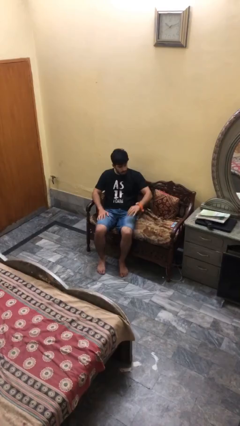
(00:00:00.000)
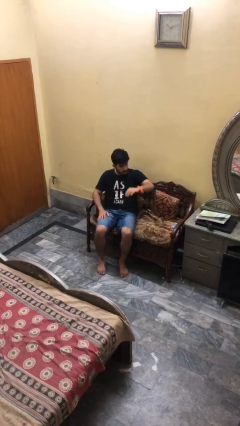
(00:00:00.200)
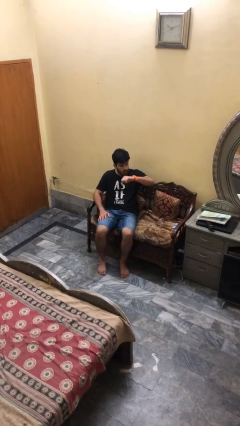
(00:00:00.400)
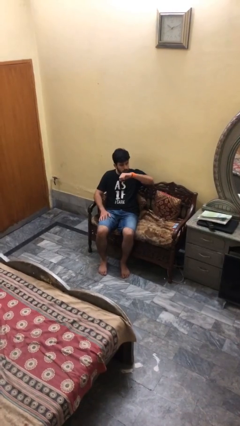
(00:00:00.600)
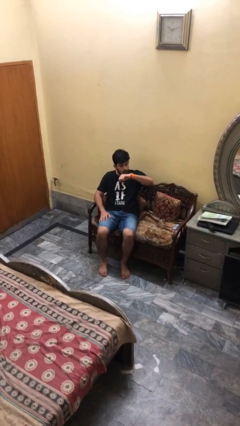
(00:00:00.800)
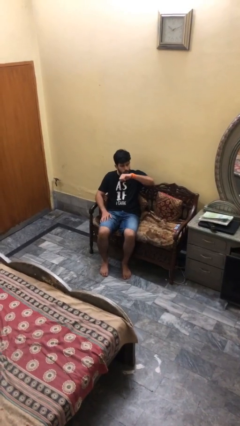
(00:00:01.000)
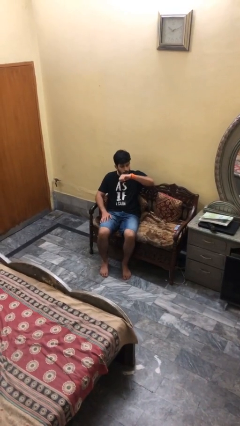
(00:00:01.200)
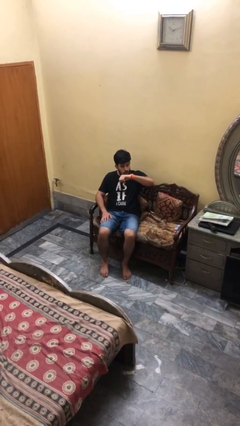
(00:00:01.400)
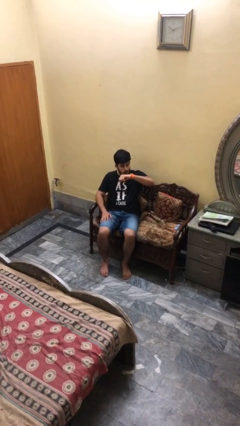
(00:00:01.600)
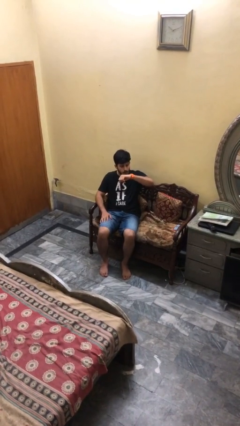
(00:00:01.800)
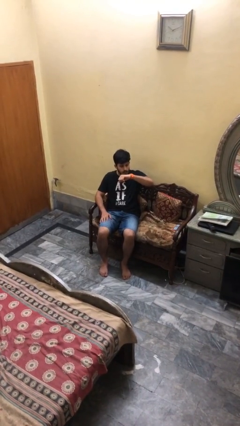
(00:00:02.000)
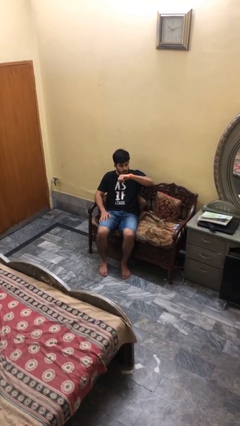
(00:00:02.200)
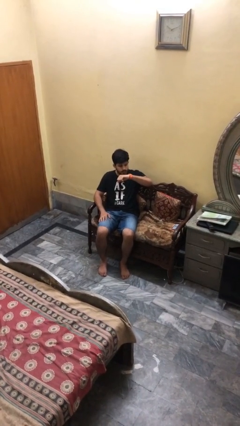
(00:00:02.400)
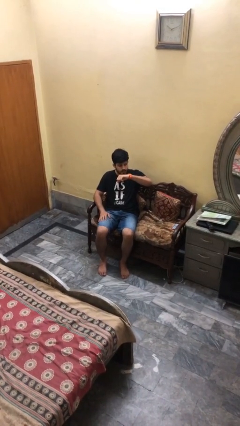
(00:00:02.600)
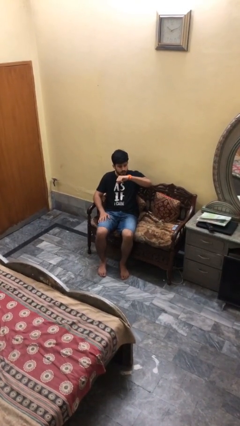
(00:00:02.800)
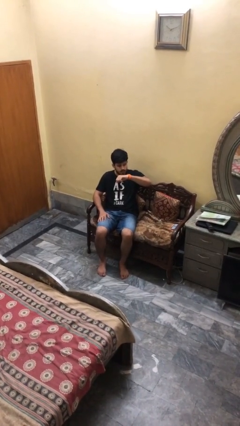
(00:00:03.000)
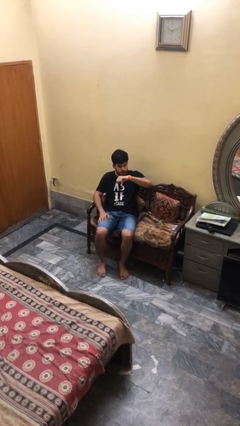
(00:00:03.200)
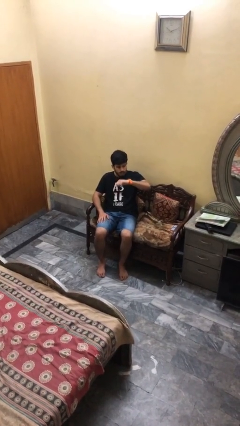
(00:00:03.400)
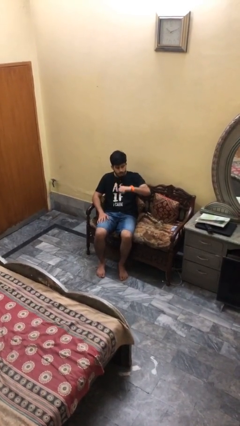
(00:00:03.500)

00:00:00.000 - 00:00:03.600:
person looks at wristwatch

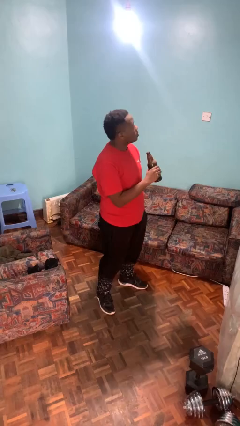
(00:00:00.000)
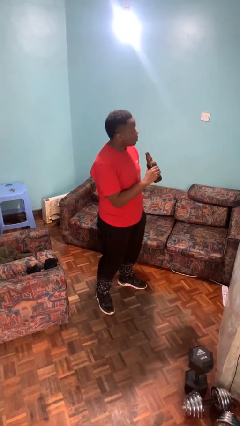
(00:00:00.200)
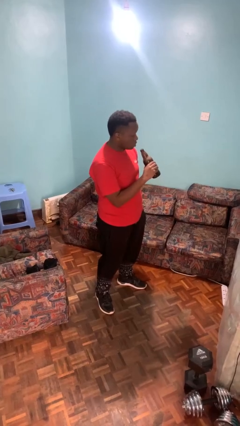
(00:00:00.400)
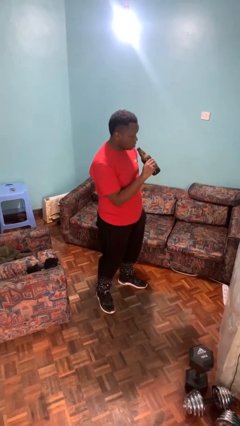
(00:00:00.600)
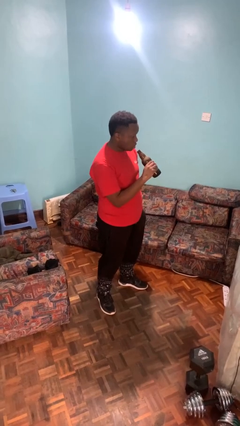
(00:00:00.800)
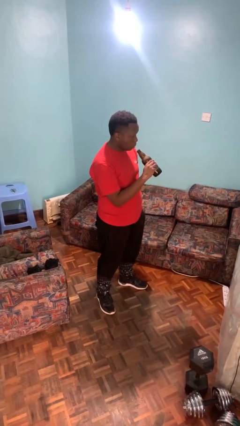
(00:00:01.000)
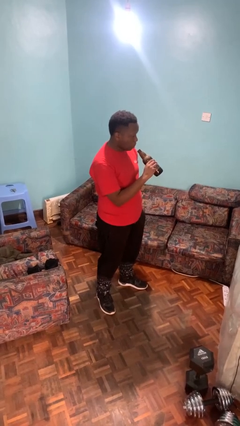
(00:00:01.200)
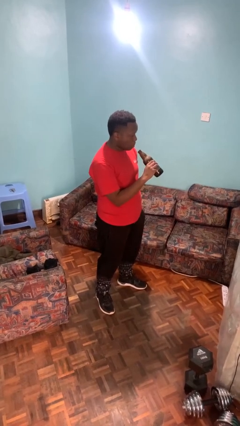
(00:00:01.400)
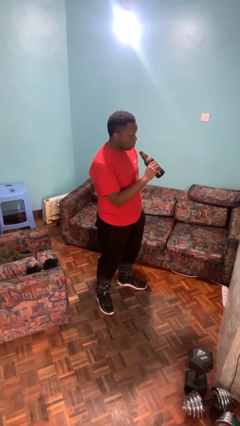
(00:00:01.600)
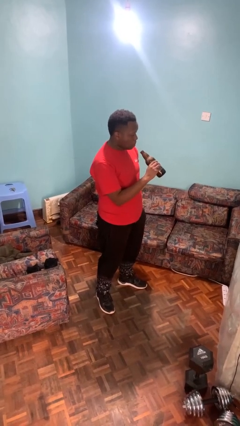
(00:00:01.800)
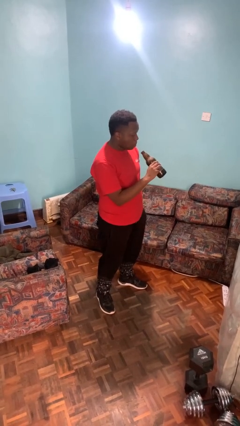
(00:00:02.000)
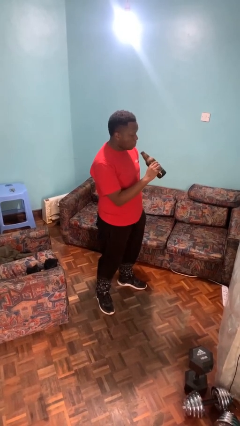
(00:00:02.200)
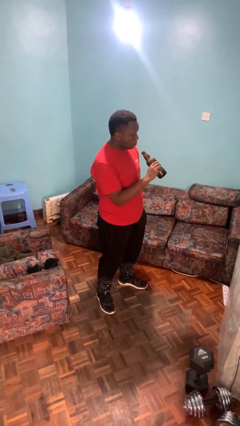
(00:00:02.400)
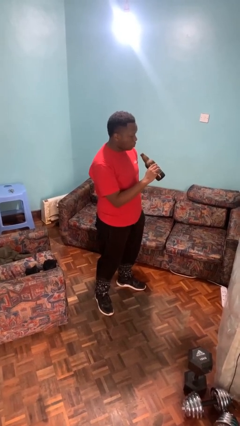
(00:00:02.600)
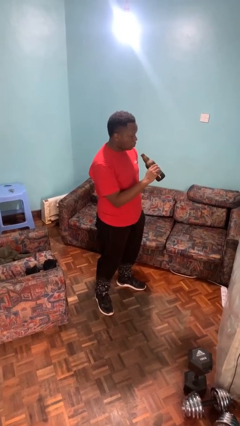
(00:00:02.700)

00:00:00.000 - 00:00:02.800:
person drinks from straw

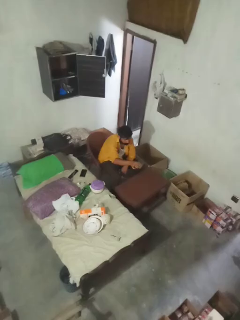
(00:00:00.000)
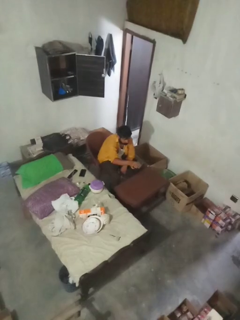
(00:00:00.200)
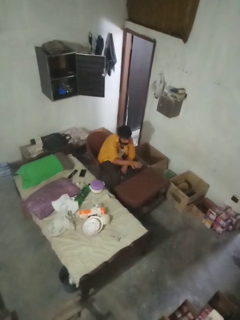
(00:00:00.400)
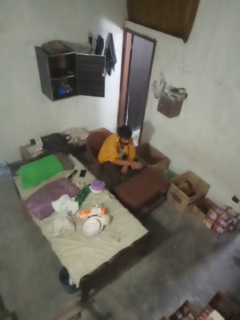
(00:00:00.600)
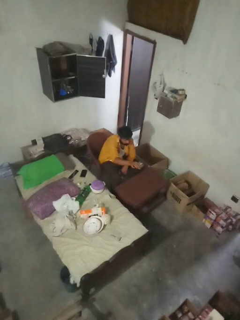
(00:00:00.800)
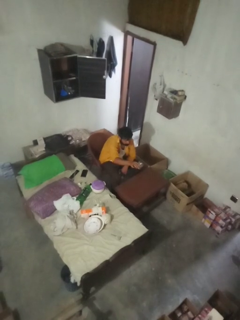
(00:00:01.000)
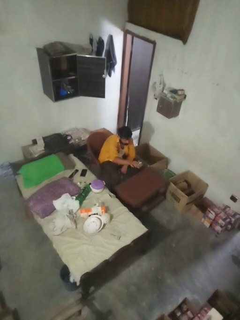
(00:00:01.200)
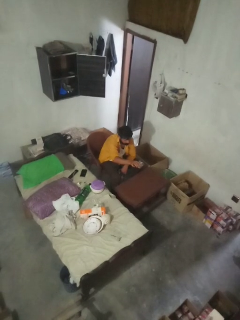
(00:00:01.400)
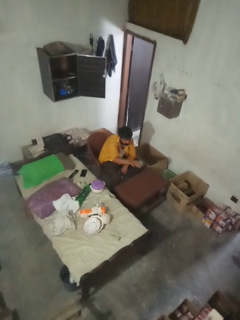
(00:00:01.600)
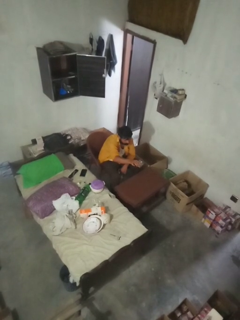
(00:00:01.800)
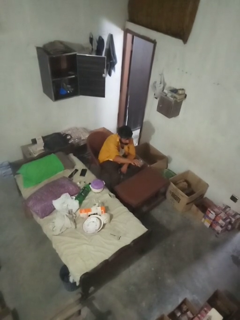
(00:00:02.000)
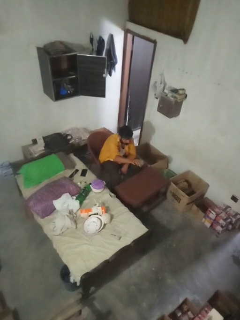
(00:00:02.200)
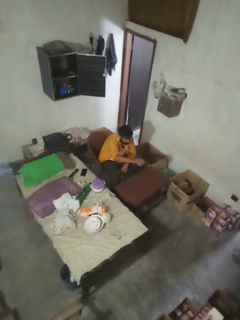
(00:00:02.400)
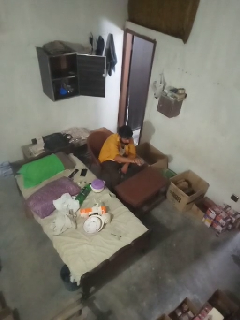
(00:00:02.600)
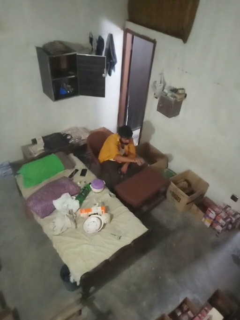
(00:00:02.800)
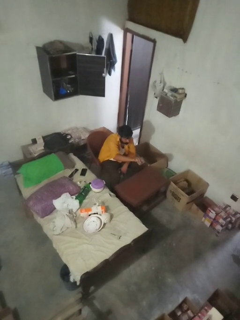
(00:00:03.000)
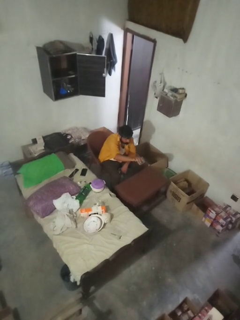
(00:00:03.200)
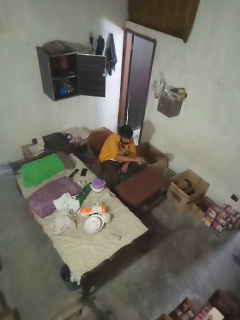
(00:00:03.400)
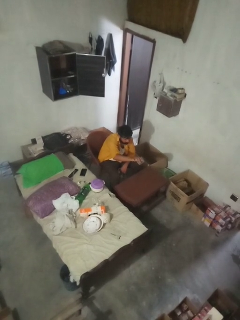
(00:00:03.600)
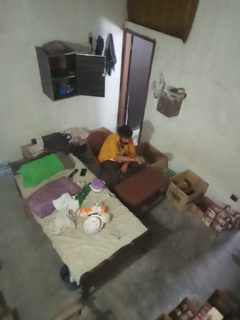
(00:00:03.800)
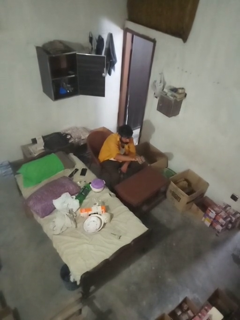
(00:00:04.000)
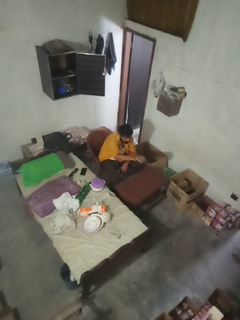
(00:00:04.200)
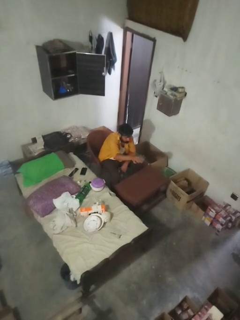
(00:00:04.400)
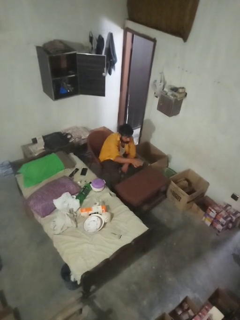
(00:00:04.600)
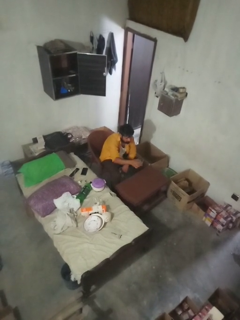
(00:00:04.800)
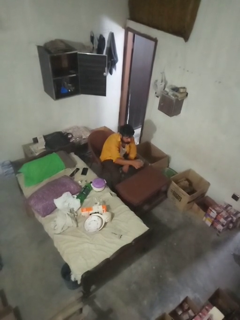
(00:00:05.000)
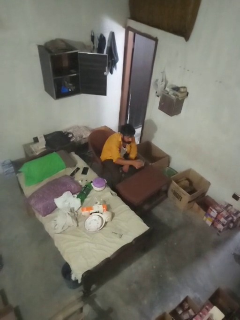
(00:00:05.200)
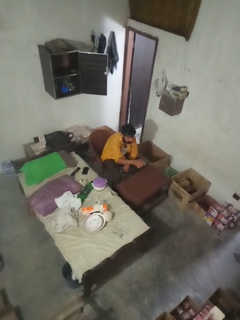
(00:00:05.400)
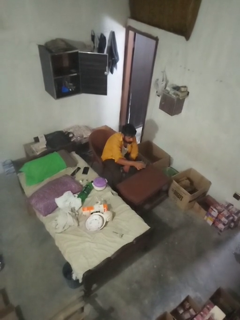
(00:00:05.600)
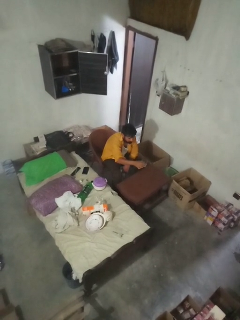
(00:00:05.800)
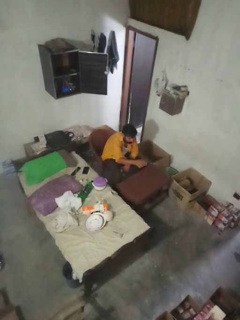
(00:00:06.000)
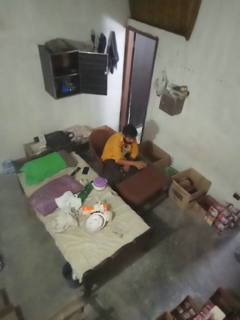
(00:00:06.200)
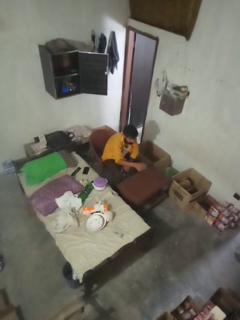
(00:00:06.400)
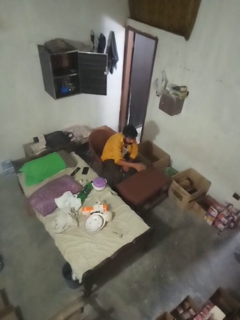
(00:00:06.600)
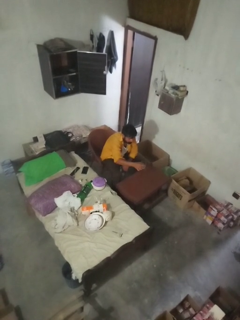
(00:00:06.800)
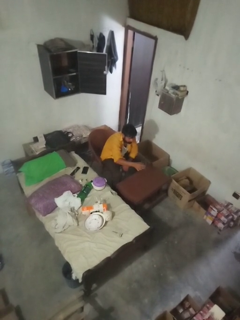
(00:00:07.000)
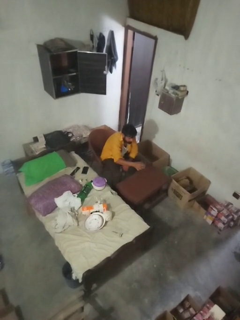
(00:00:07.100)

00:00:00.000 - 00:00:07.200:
person spills on table

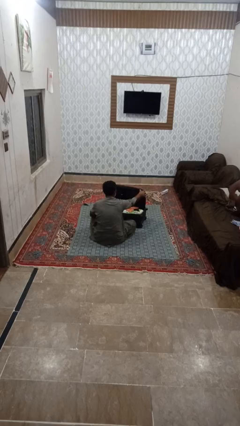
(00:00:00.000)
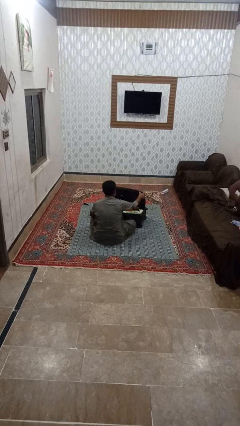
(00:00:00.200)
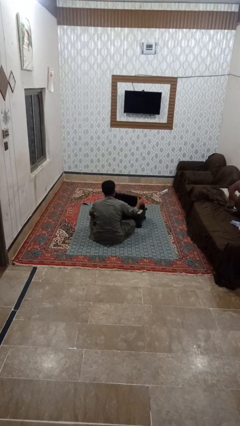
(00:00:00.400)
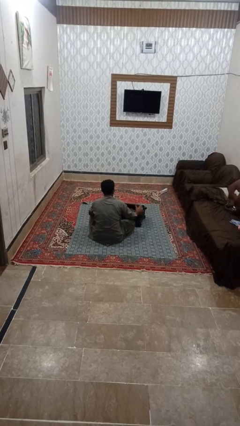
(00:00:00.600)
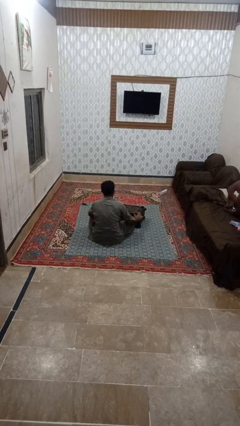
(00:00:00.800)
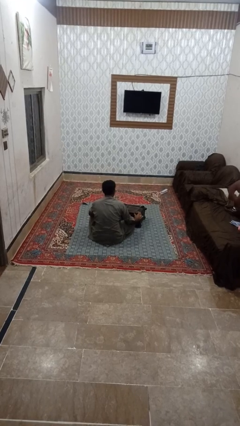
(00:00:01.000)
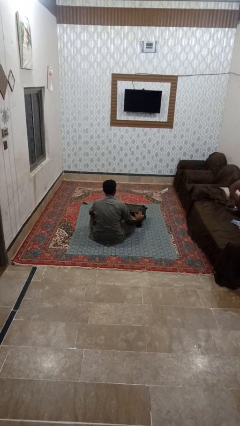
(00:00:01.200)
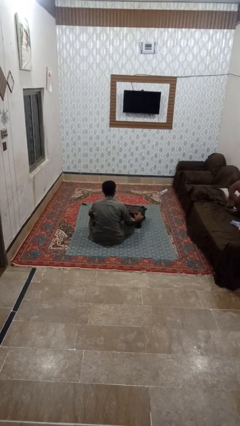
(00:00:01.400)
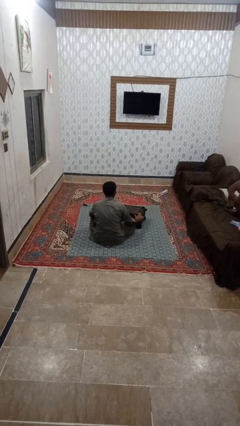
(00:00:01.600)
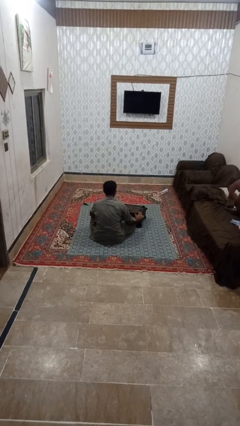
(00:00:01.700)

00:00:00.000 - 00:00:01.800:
person closes suitcase

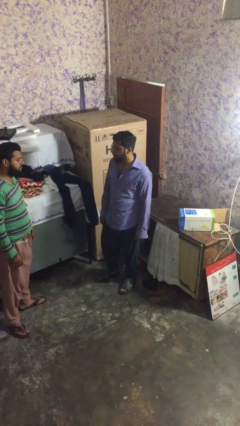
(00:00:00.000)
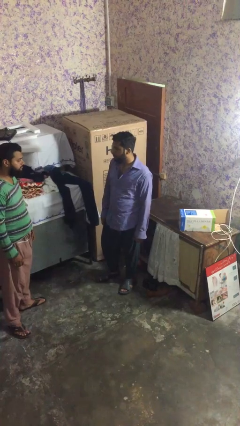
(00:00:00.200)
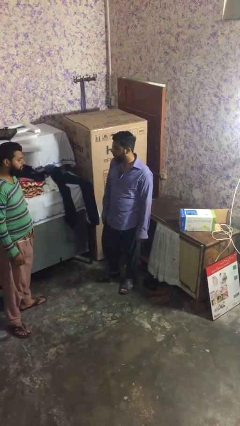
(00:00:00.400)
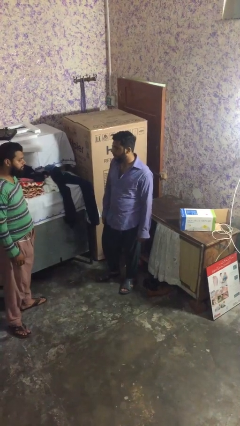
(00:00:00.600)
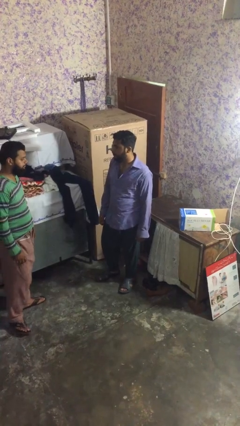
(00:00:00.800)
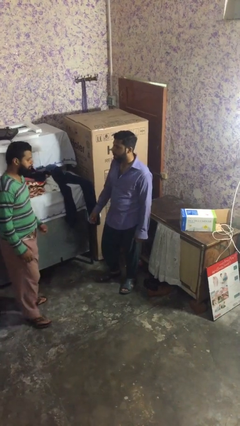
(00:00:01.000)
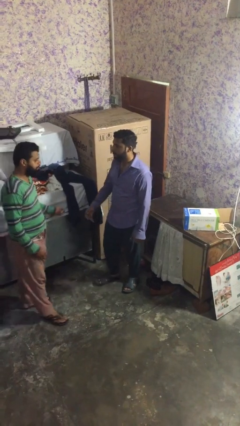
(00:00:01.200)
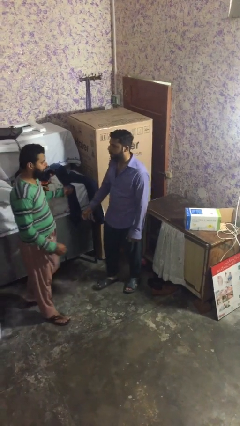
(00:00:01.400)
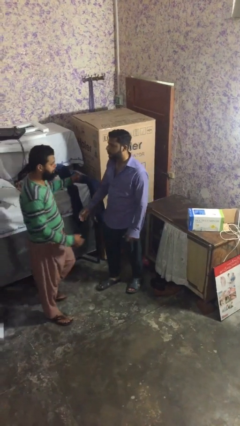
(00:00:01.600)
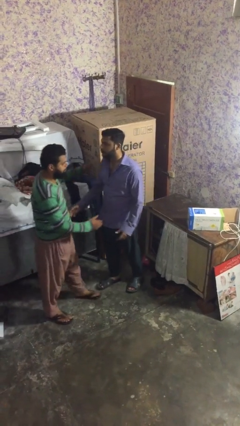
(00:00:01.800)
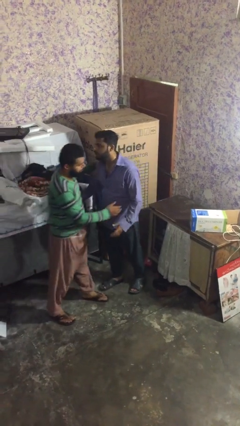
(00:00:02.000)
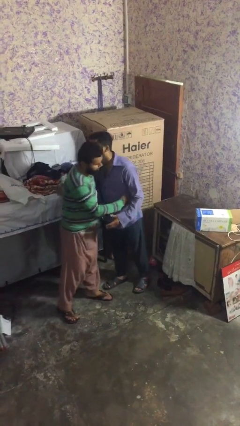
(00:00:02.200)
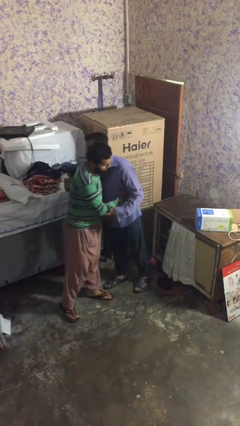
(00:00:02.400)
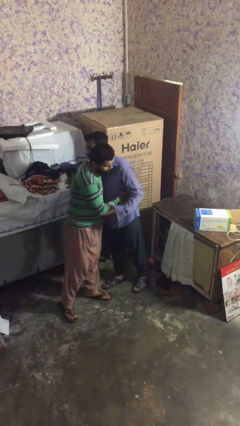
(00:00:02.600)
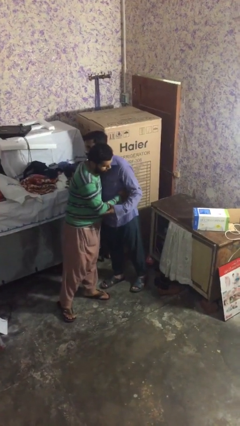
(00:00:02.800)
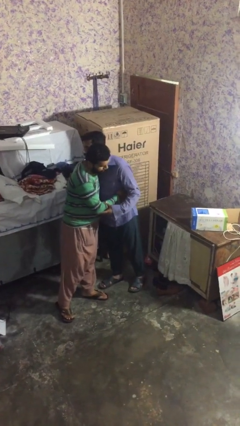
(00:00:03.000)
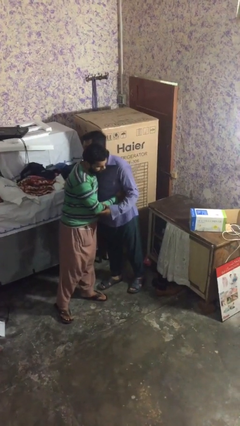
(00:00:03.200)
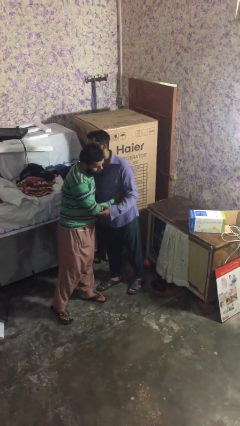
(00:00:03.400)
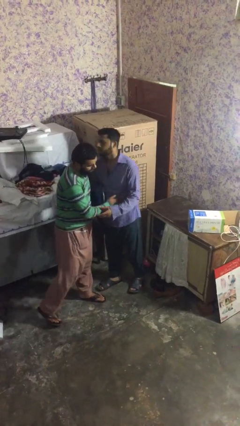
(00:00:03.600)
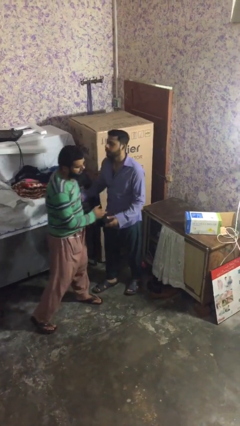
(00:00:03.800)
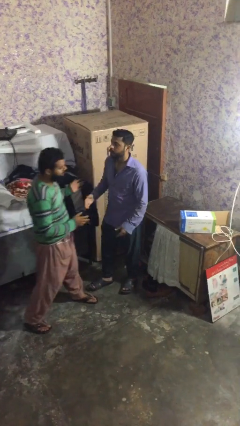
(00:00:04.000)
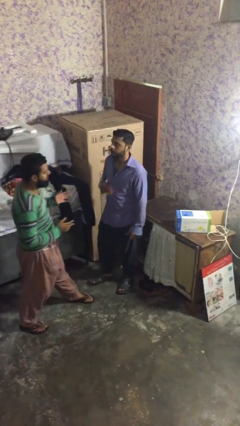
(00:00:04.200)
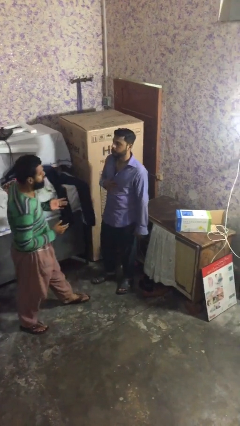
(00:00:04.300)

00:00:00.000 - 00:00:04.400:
person embraces person
